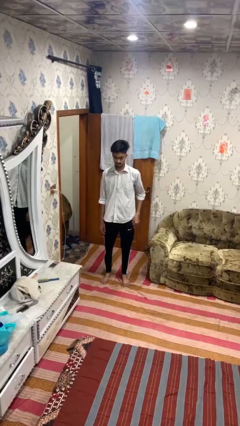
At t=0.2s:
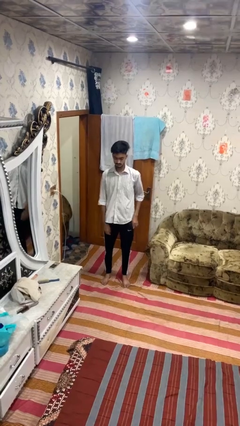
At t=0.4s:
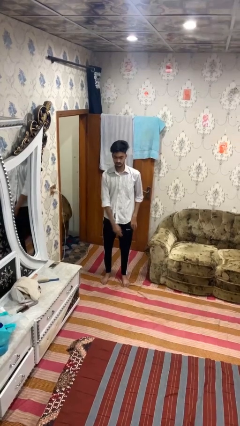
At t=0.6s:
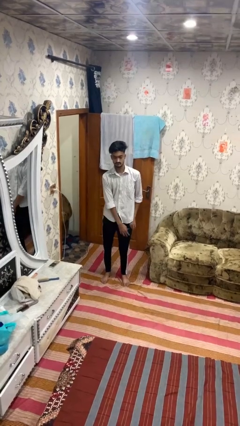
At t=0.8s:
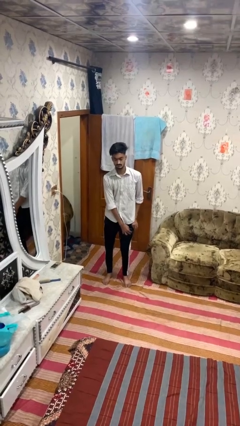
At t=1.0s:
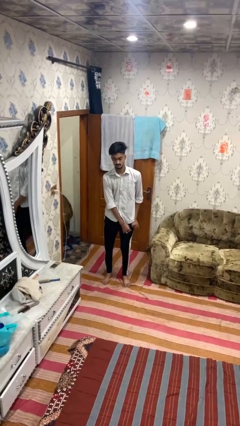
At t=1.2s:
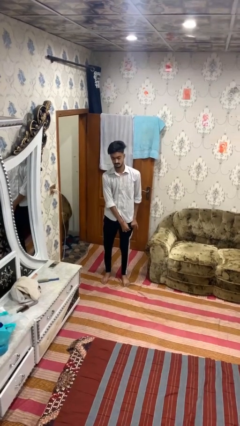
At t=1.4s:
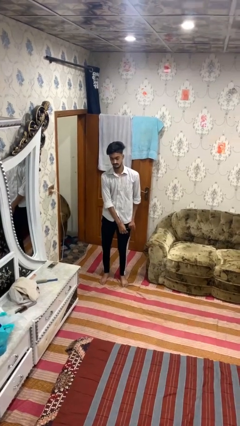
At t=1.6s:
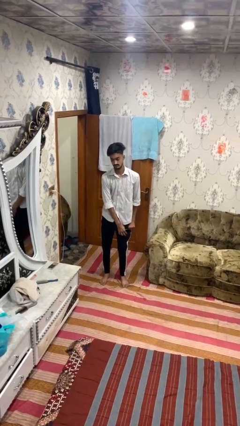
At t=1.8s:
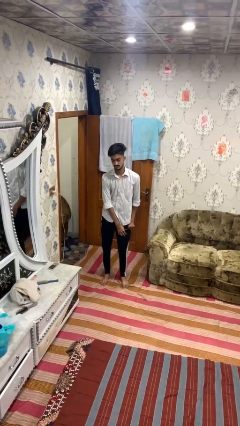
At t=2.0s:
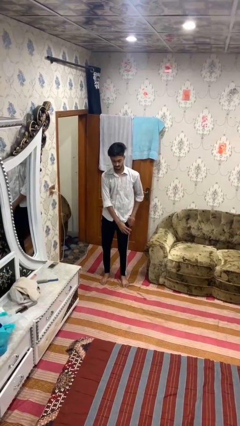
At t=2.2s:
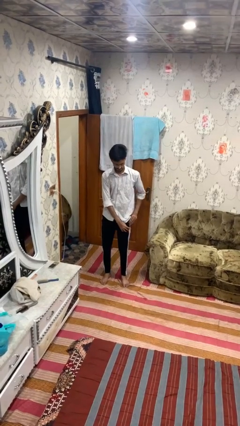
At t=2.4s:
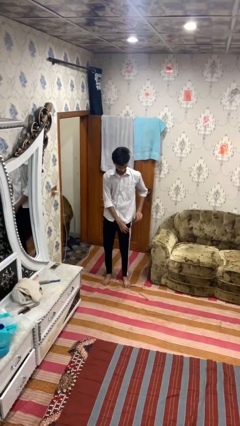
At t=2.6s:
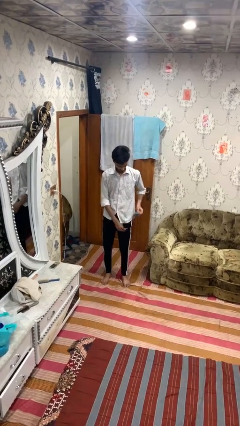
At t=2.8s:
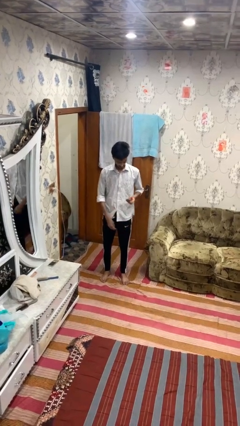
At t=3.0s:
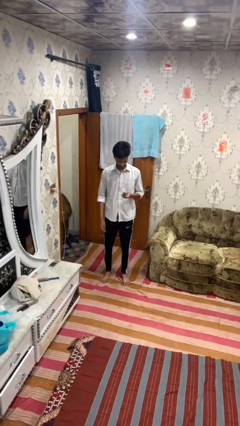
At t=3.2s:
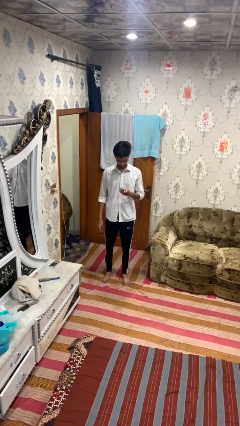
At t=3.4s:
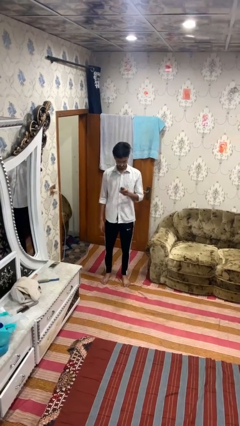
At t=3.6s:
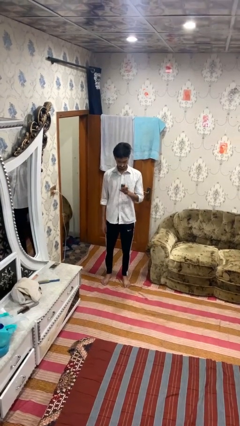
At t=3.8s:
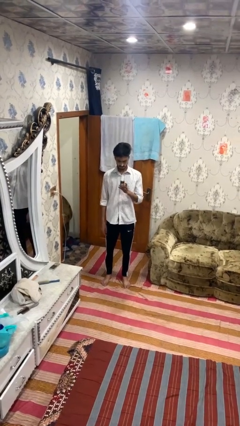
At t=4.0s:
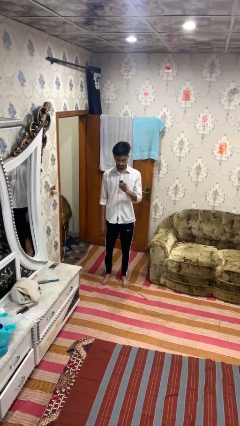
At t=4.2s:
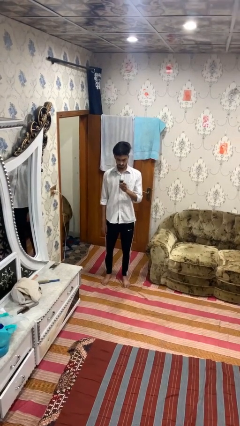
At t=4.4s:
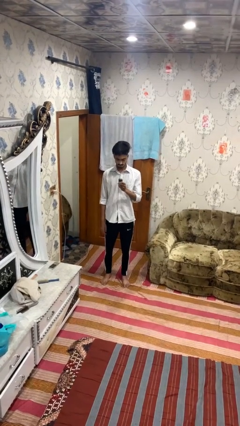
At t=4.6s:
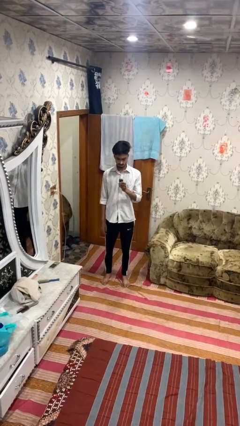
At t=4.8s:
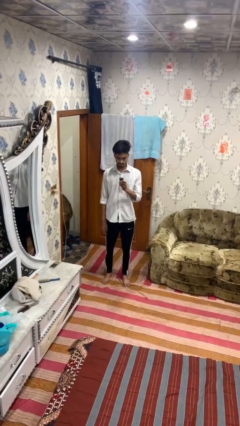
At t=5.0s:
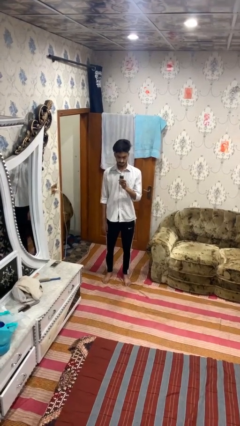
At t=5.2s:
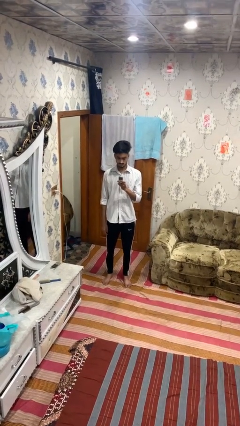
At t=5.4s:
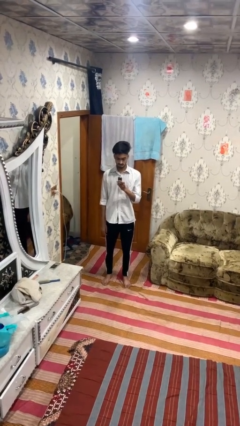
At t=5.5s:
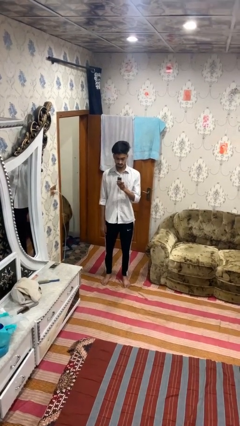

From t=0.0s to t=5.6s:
person takes phone from pocket

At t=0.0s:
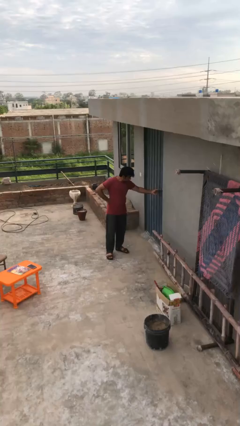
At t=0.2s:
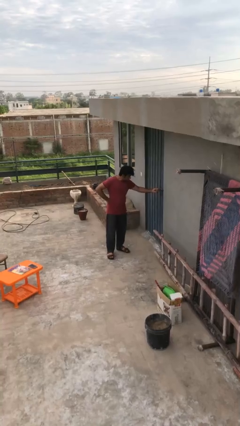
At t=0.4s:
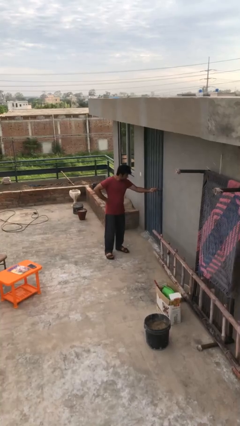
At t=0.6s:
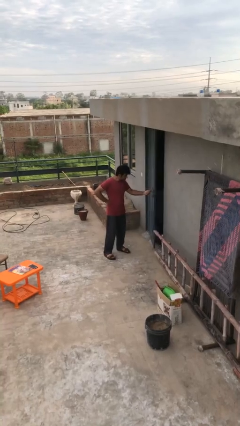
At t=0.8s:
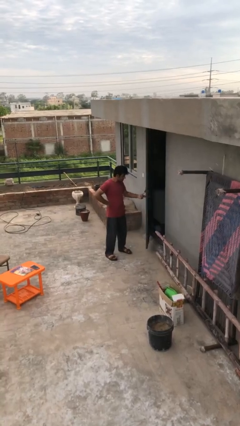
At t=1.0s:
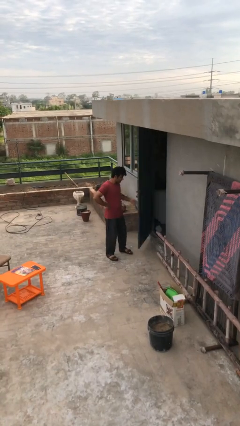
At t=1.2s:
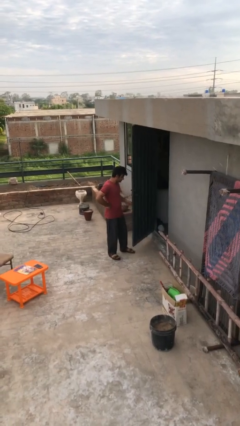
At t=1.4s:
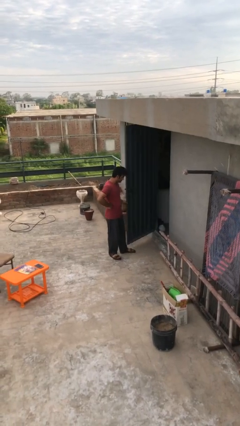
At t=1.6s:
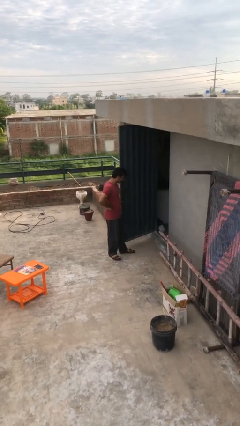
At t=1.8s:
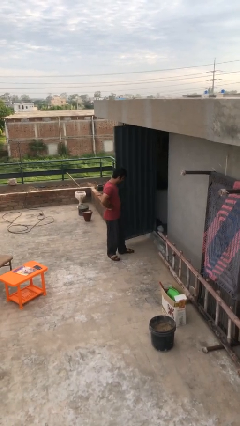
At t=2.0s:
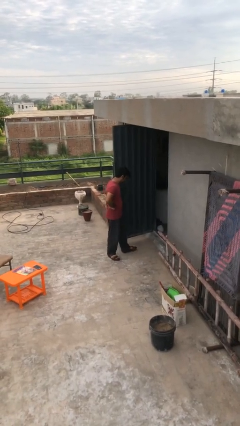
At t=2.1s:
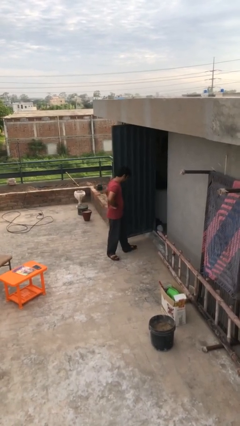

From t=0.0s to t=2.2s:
person opens facility door

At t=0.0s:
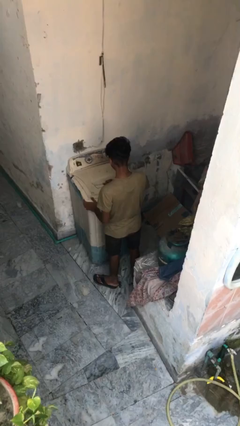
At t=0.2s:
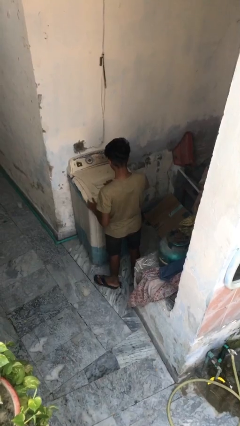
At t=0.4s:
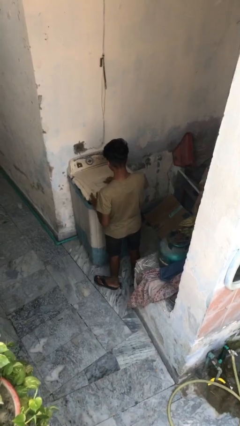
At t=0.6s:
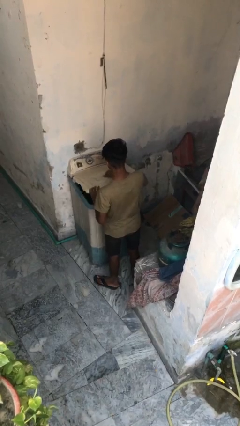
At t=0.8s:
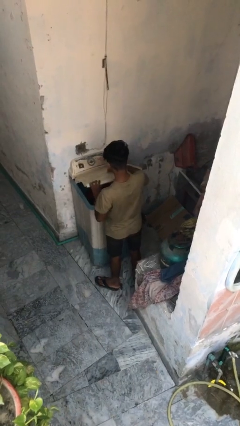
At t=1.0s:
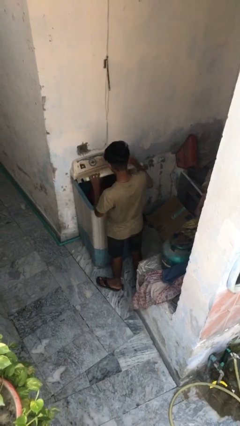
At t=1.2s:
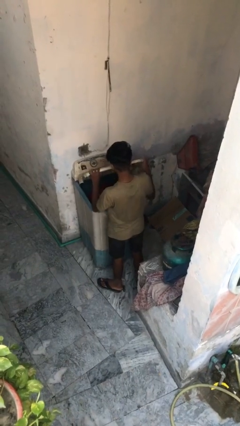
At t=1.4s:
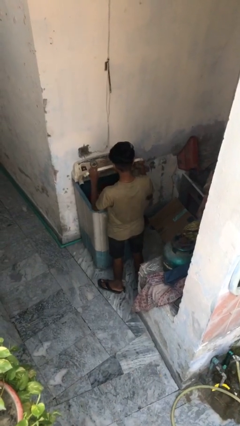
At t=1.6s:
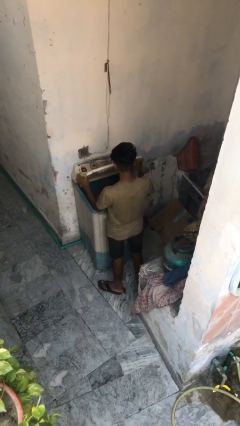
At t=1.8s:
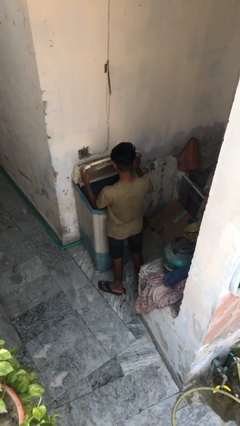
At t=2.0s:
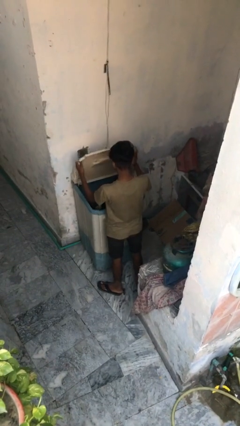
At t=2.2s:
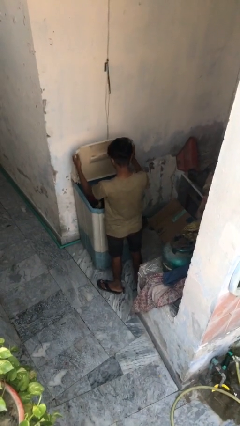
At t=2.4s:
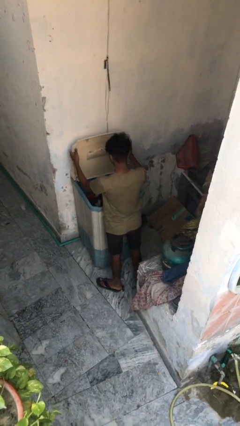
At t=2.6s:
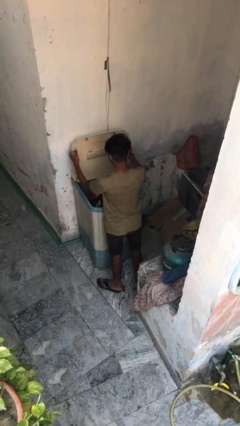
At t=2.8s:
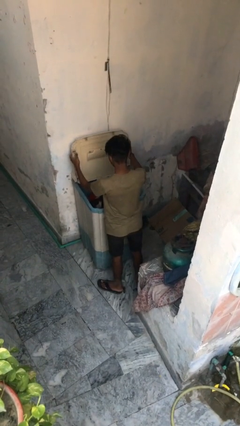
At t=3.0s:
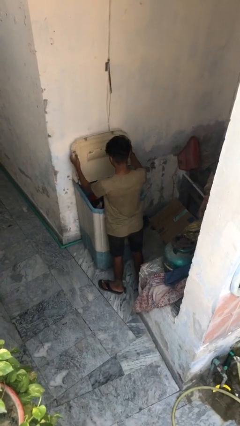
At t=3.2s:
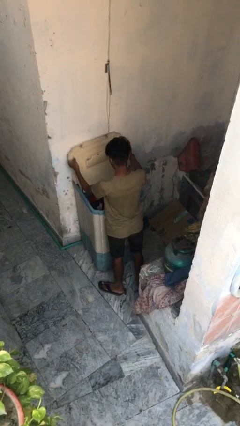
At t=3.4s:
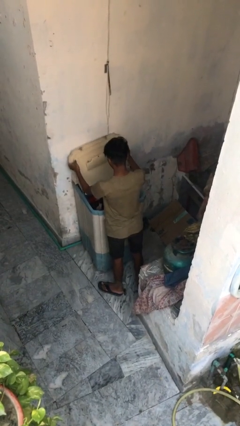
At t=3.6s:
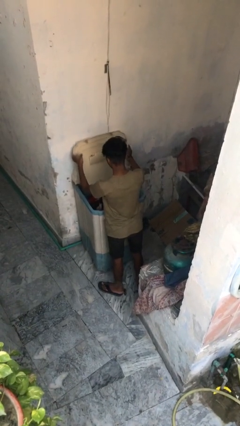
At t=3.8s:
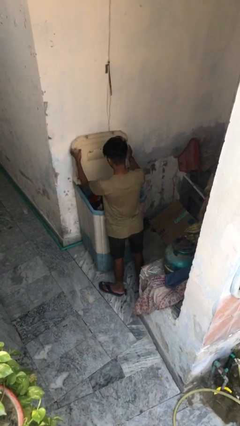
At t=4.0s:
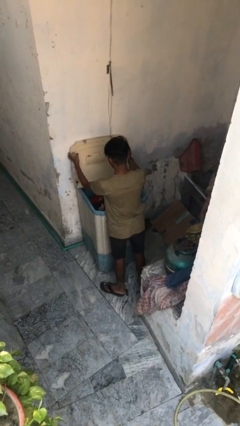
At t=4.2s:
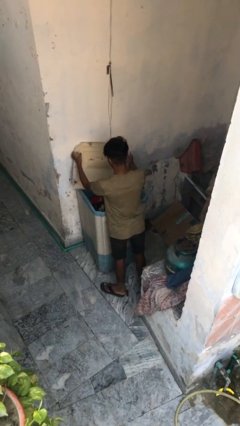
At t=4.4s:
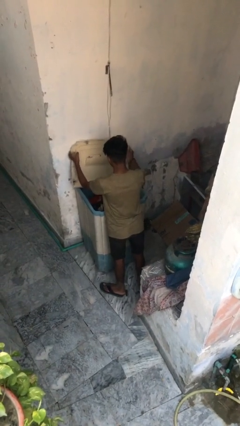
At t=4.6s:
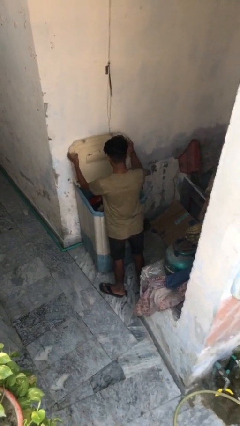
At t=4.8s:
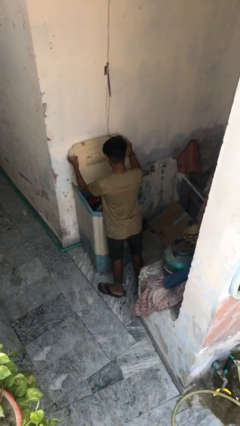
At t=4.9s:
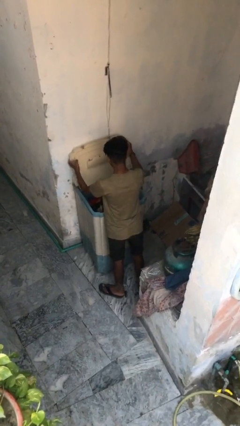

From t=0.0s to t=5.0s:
person opens clothes washer

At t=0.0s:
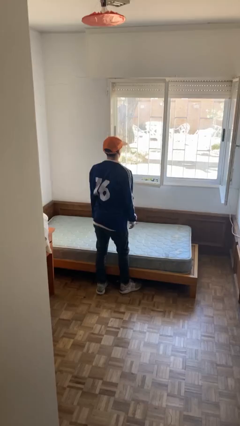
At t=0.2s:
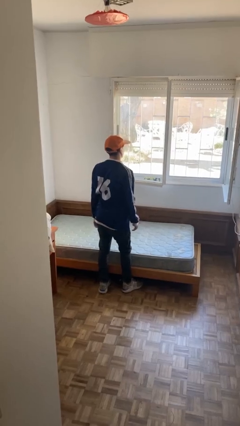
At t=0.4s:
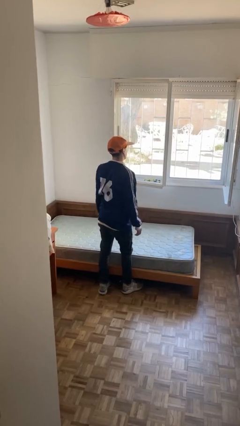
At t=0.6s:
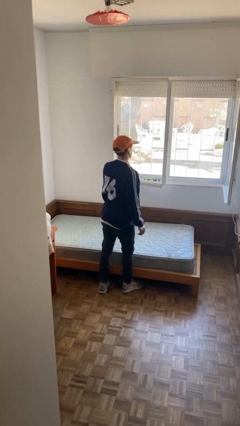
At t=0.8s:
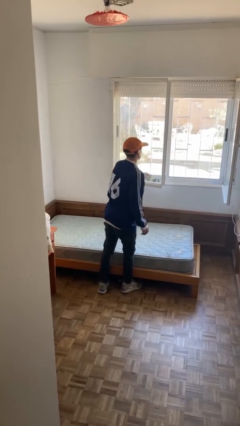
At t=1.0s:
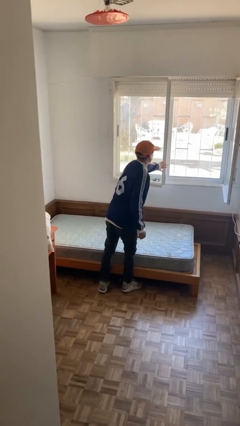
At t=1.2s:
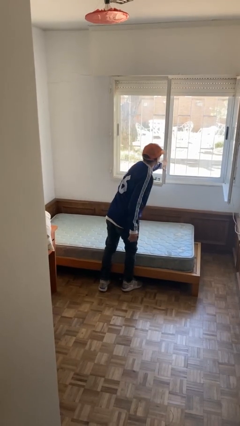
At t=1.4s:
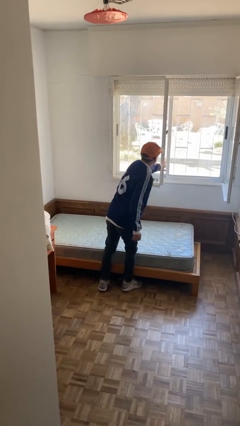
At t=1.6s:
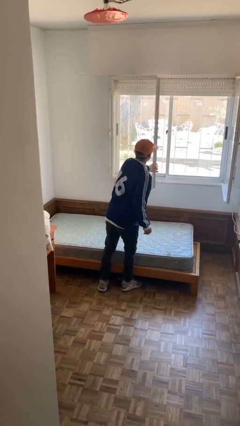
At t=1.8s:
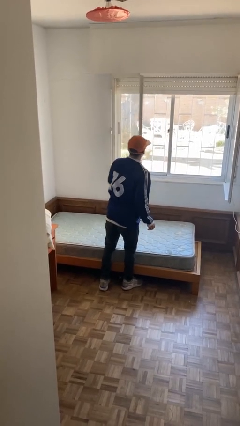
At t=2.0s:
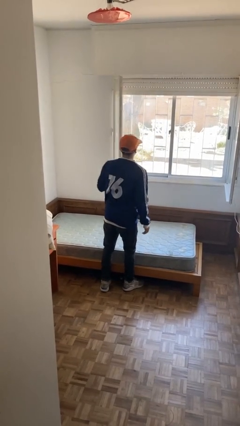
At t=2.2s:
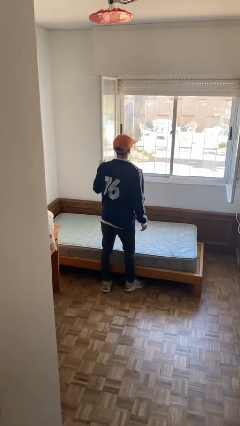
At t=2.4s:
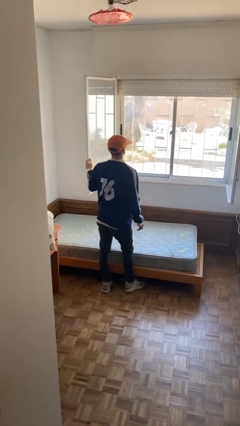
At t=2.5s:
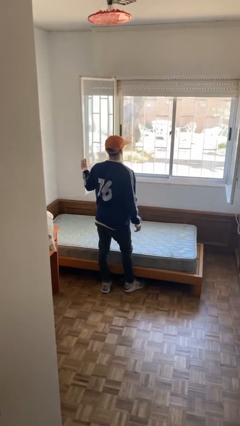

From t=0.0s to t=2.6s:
person opens home window

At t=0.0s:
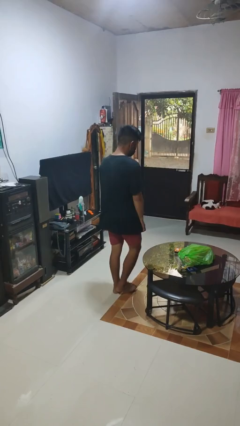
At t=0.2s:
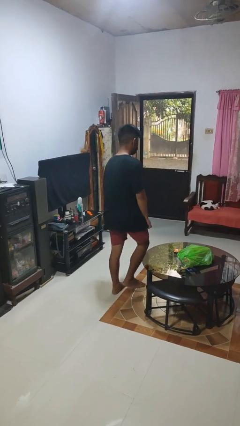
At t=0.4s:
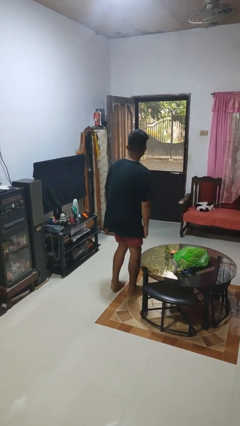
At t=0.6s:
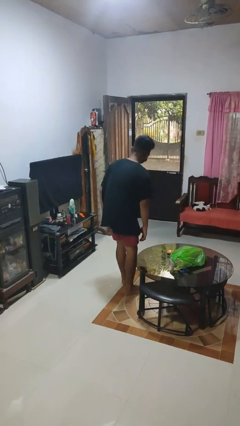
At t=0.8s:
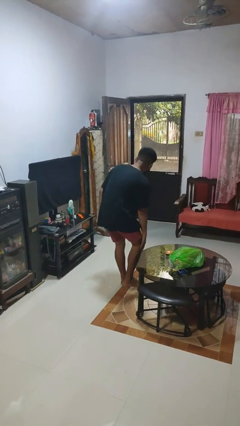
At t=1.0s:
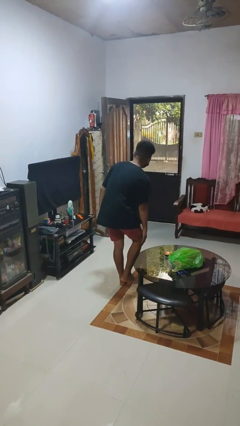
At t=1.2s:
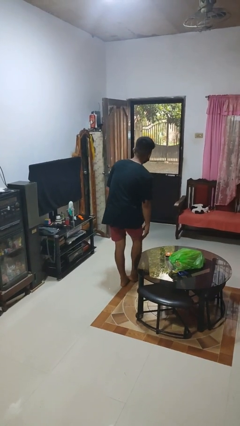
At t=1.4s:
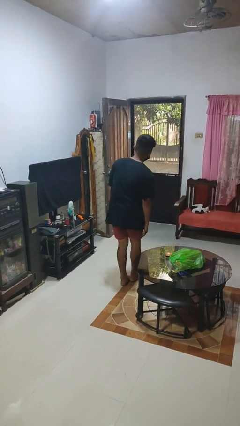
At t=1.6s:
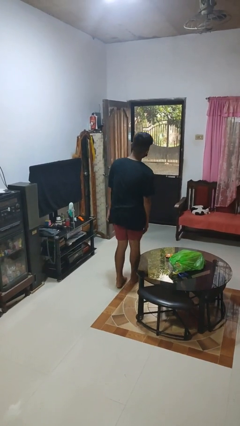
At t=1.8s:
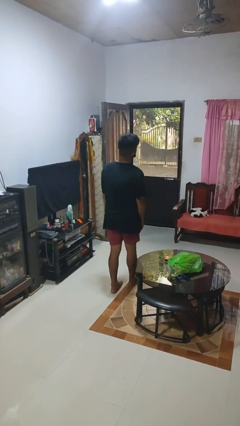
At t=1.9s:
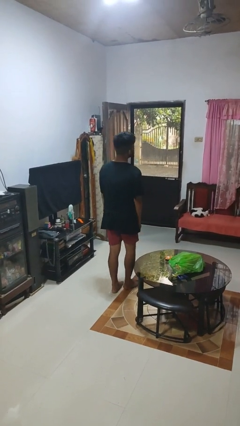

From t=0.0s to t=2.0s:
person bumps into table

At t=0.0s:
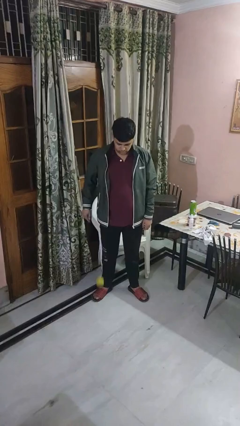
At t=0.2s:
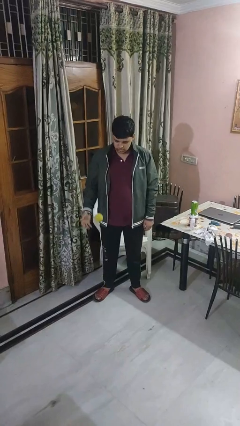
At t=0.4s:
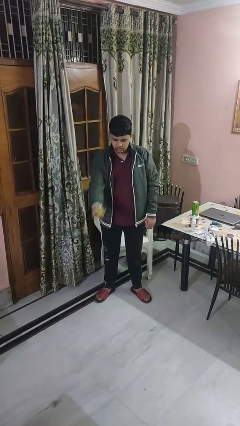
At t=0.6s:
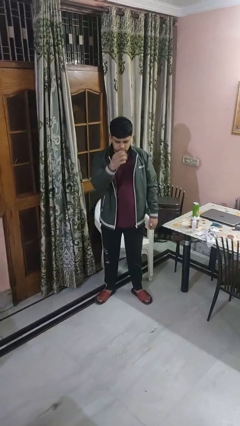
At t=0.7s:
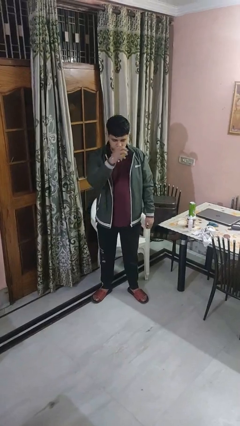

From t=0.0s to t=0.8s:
person bounces ball on floor
